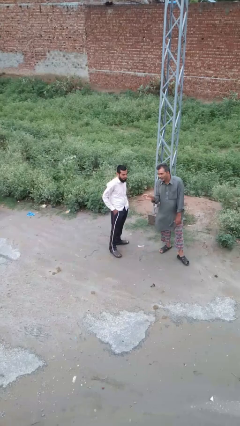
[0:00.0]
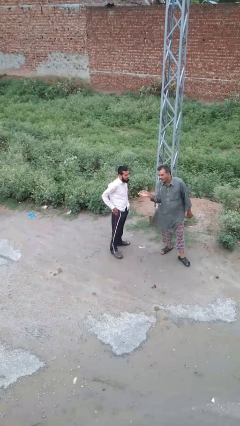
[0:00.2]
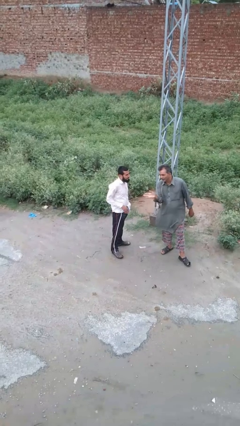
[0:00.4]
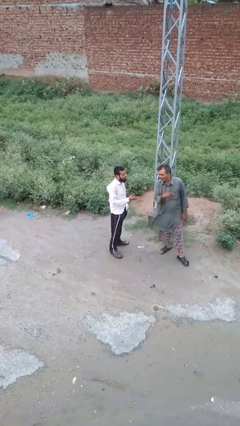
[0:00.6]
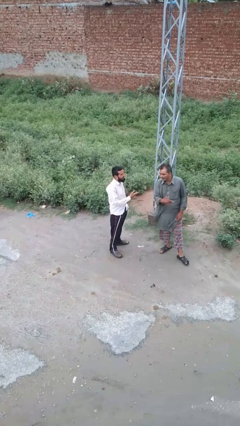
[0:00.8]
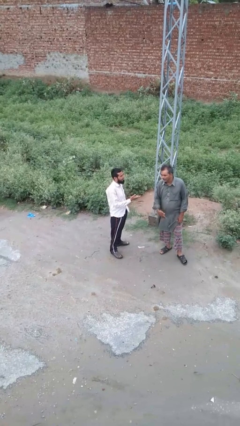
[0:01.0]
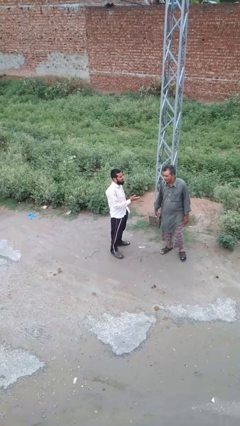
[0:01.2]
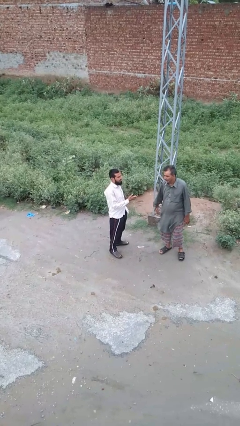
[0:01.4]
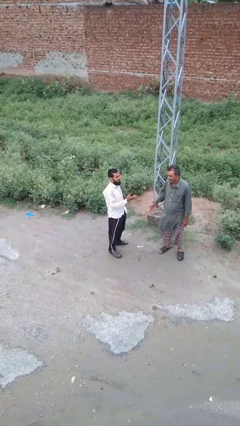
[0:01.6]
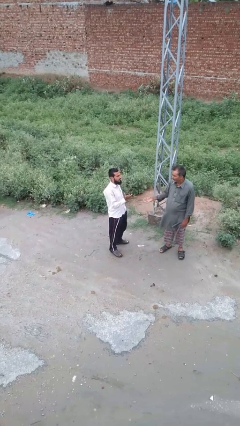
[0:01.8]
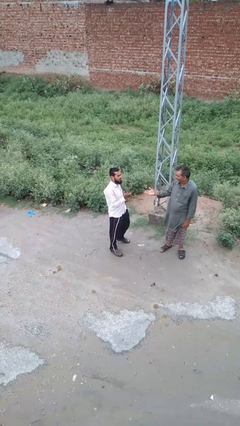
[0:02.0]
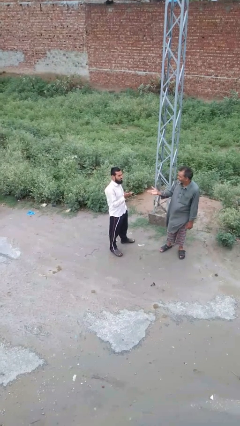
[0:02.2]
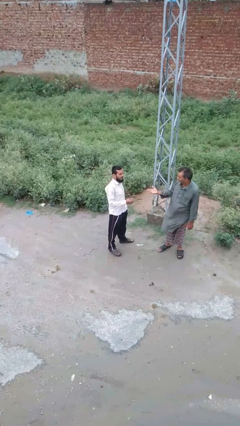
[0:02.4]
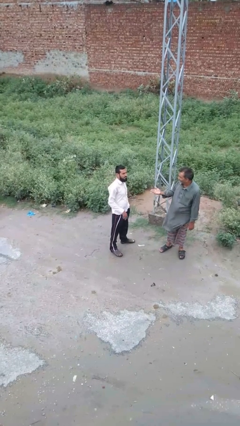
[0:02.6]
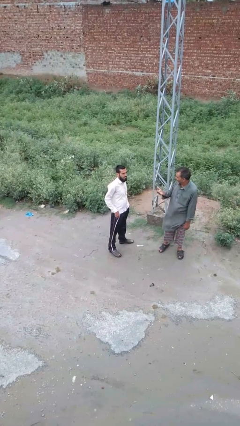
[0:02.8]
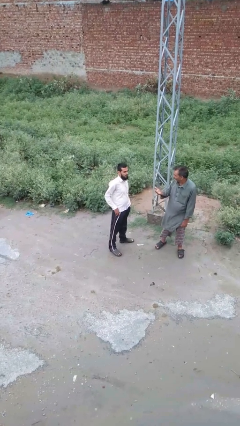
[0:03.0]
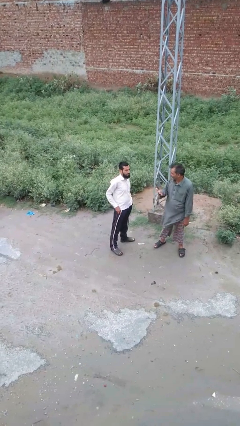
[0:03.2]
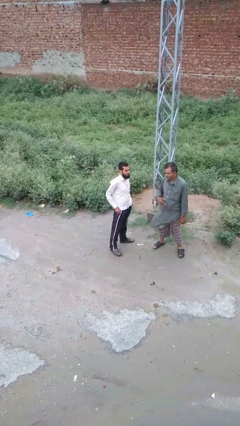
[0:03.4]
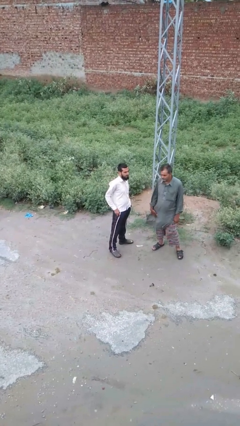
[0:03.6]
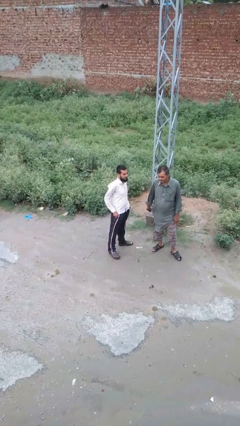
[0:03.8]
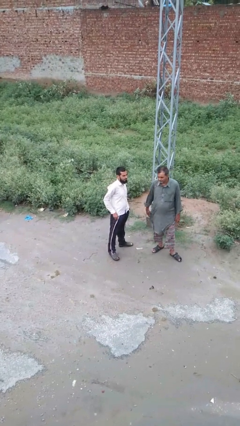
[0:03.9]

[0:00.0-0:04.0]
person talks to person

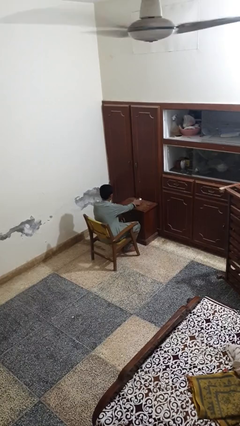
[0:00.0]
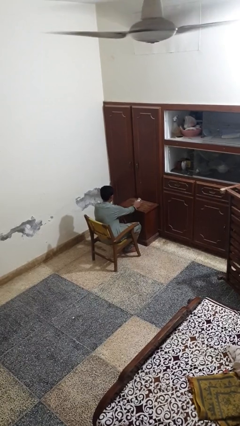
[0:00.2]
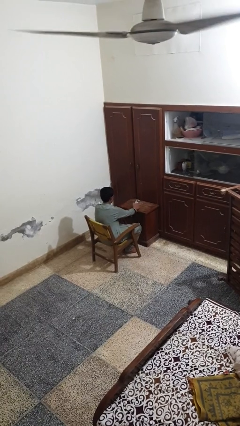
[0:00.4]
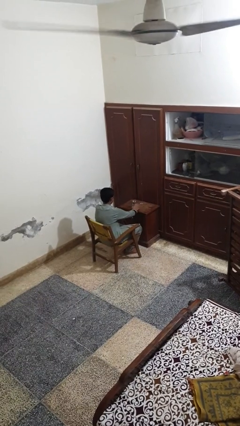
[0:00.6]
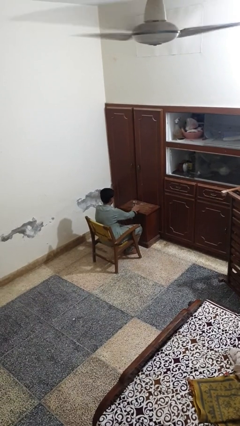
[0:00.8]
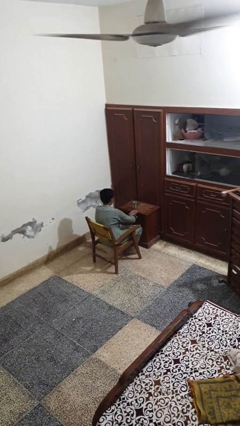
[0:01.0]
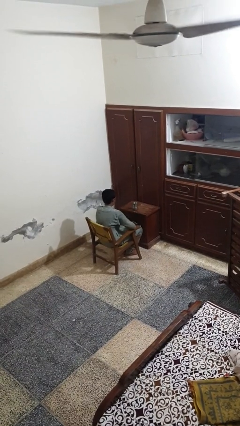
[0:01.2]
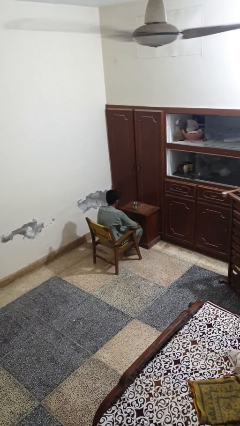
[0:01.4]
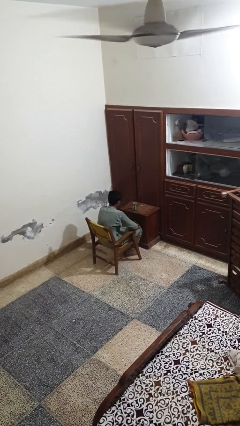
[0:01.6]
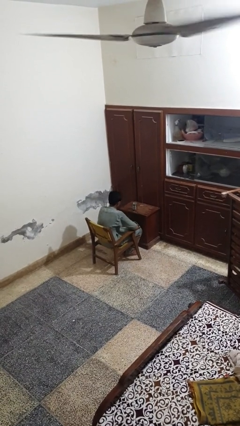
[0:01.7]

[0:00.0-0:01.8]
person sets upright glass

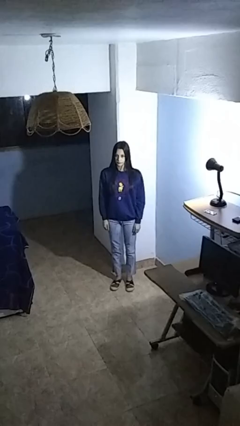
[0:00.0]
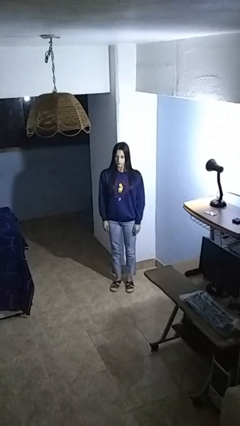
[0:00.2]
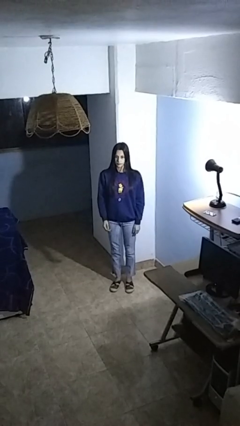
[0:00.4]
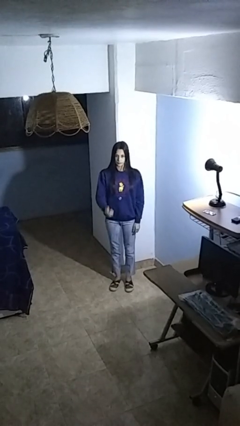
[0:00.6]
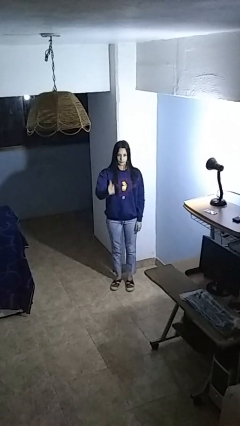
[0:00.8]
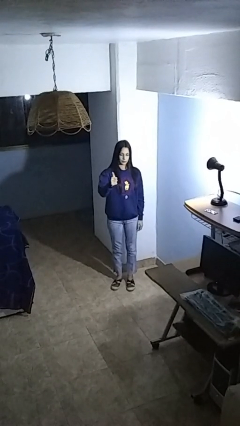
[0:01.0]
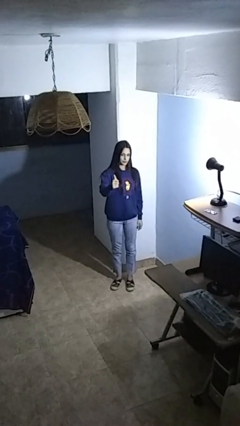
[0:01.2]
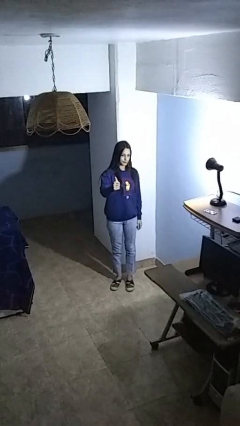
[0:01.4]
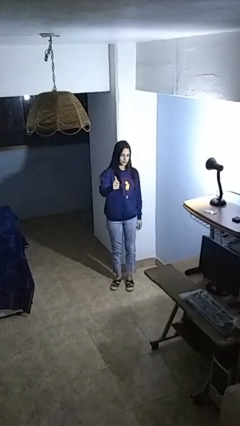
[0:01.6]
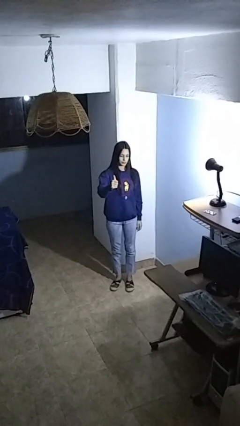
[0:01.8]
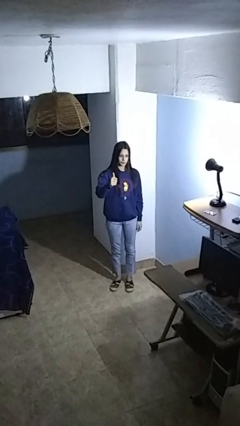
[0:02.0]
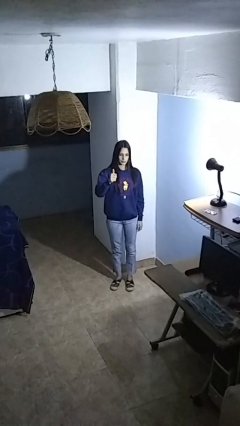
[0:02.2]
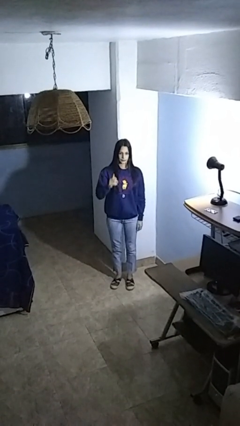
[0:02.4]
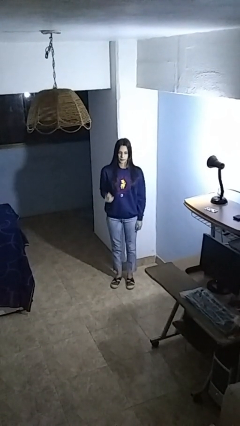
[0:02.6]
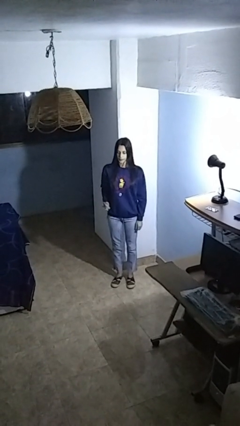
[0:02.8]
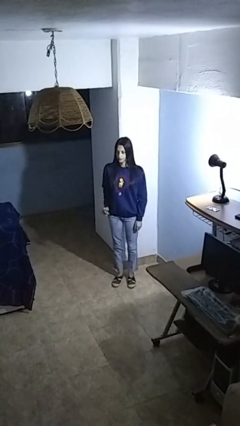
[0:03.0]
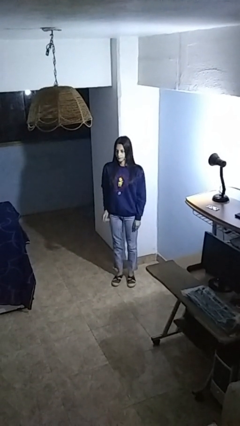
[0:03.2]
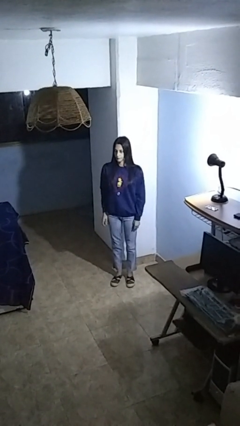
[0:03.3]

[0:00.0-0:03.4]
person gestures thumbs up

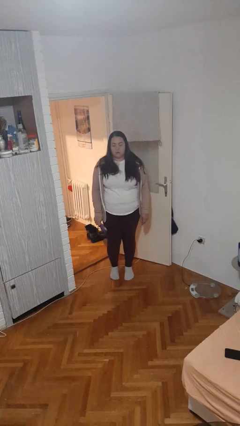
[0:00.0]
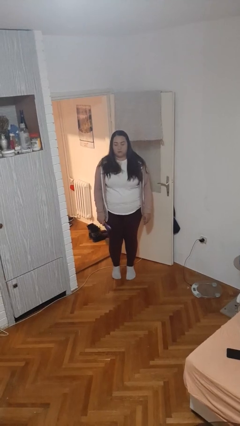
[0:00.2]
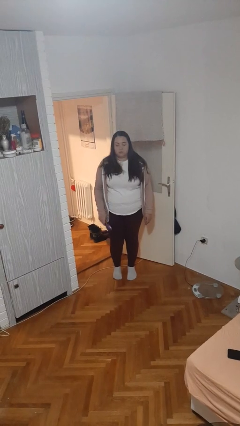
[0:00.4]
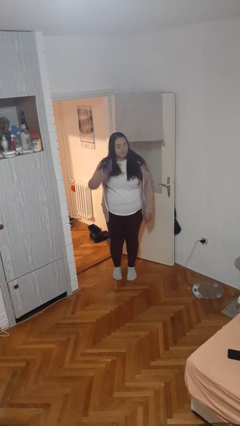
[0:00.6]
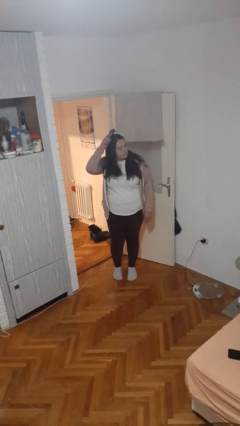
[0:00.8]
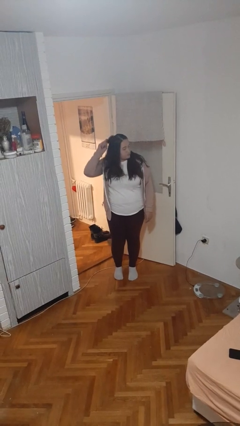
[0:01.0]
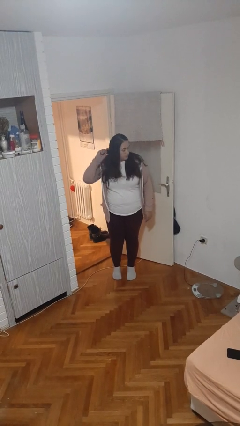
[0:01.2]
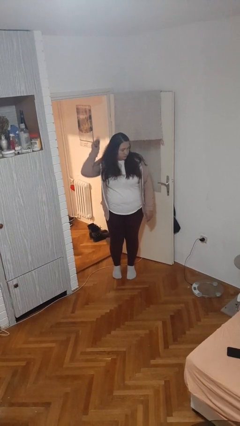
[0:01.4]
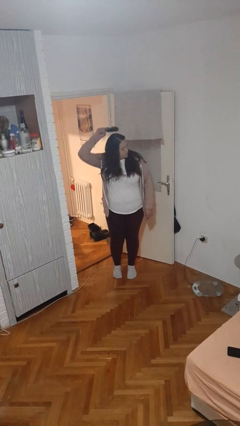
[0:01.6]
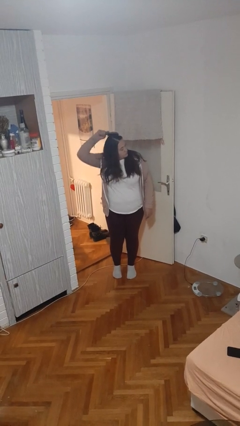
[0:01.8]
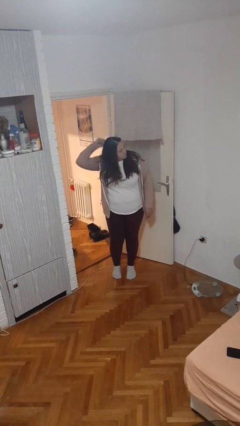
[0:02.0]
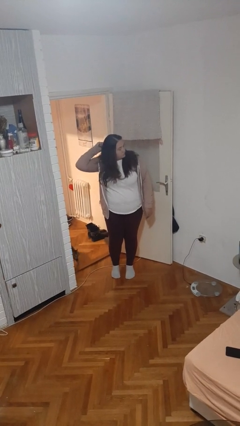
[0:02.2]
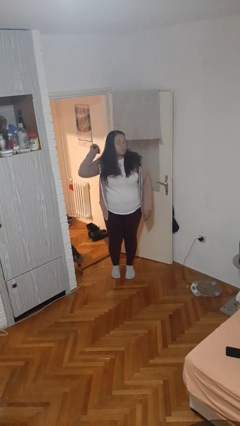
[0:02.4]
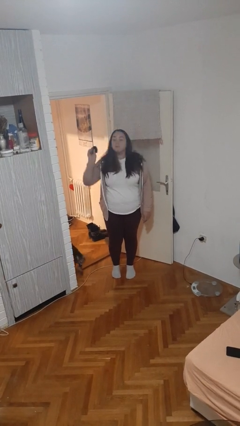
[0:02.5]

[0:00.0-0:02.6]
person brushes hair

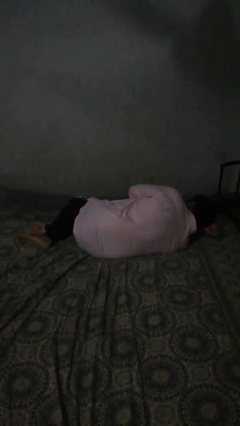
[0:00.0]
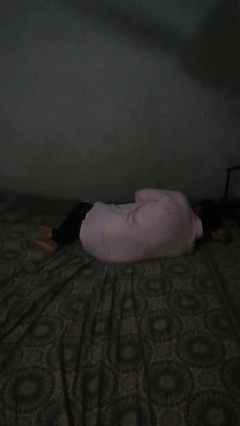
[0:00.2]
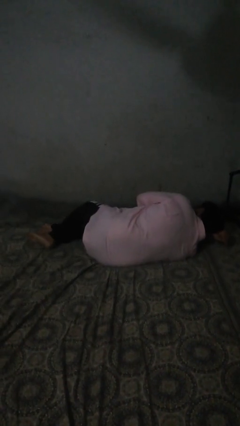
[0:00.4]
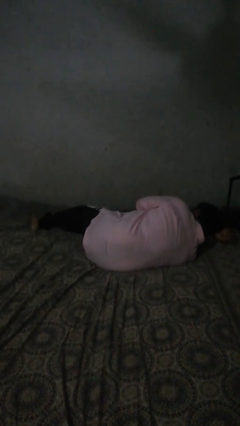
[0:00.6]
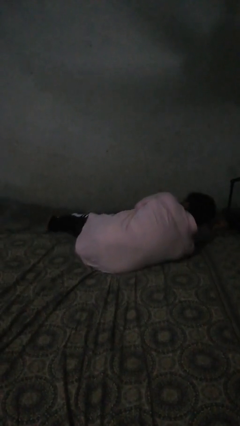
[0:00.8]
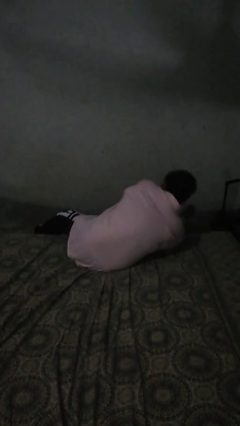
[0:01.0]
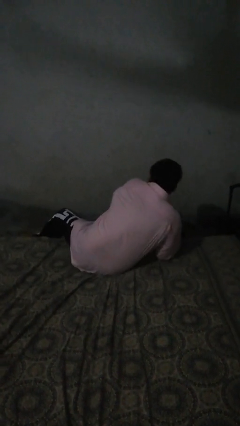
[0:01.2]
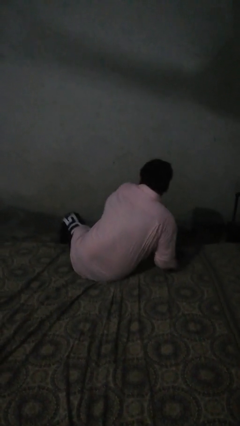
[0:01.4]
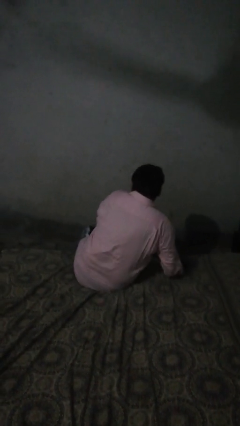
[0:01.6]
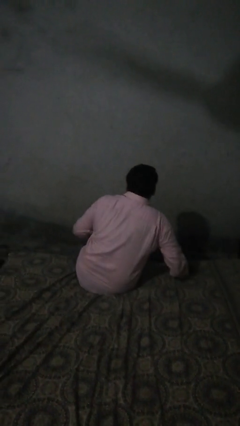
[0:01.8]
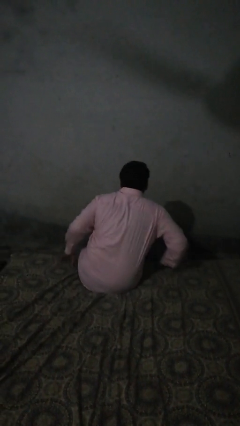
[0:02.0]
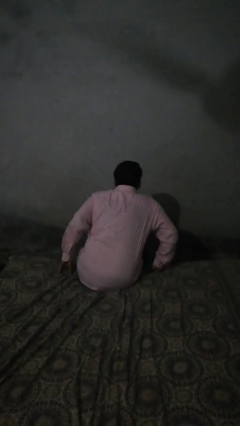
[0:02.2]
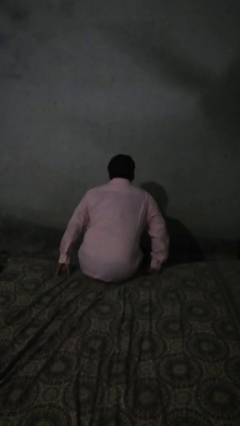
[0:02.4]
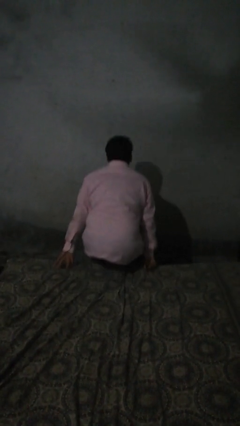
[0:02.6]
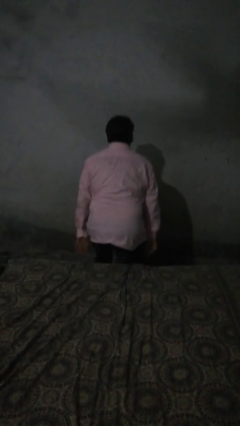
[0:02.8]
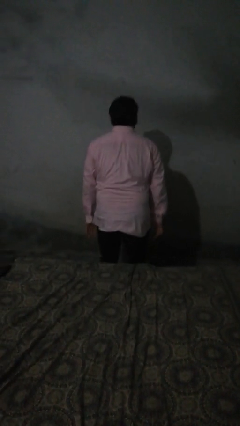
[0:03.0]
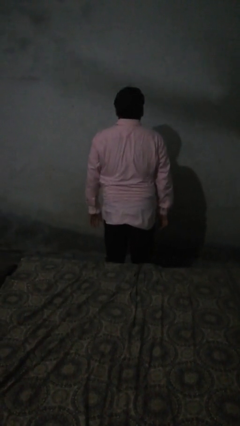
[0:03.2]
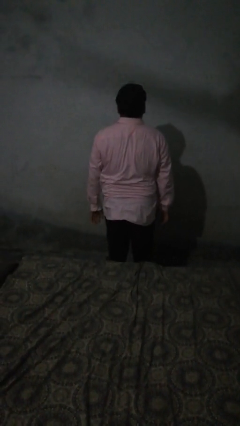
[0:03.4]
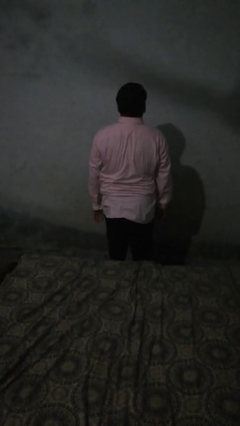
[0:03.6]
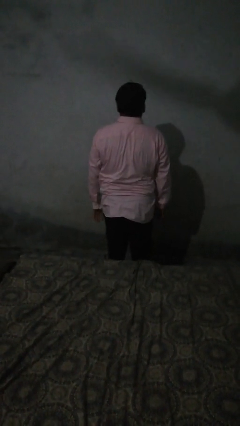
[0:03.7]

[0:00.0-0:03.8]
person stands up

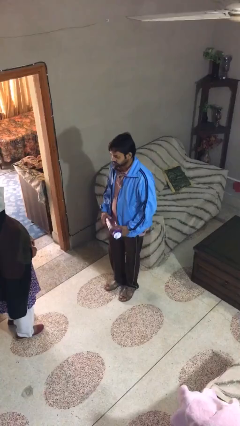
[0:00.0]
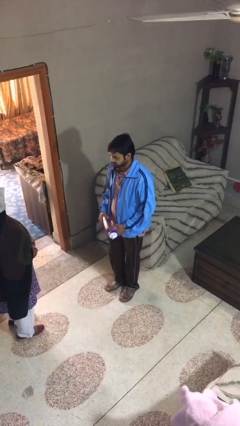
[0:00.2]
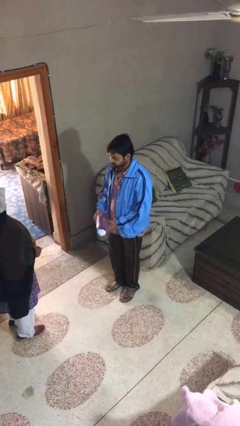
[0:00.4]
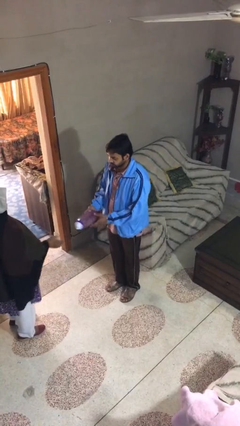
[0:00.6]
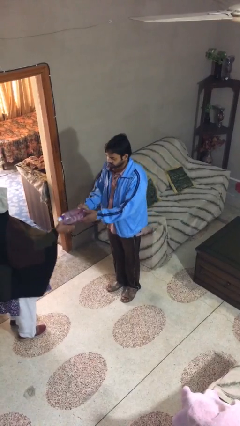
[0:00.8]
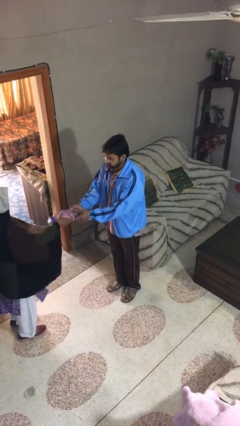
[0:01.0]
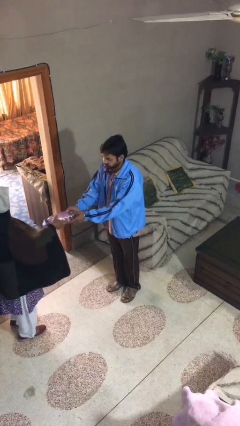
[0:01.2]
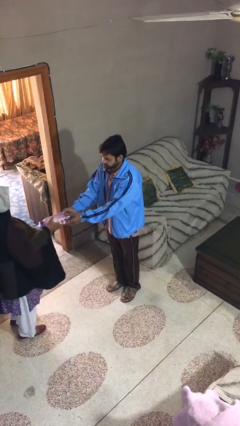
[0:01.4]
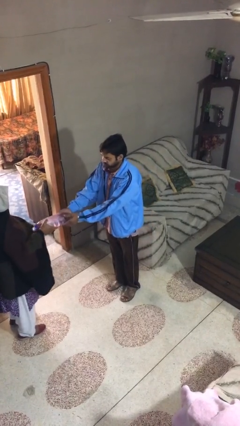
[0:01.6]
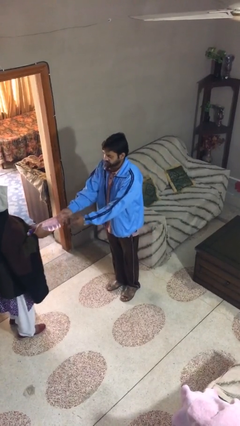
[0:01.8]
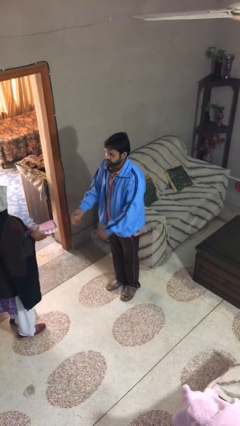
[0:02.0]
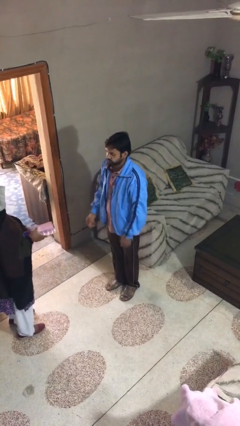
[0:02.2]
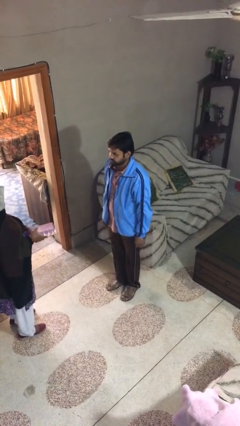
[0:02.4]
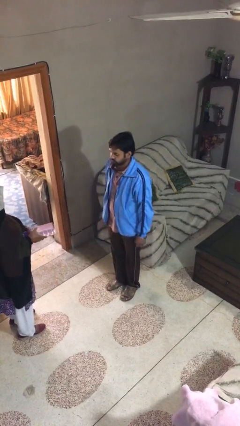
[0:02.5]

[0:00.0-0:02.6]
person transfers object to person
